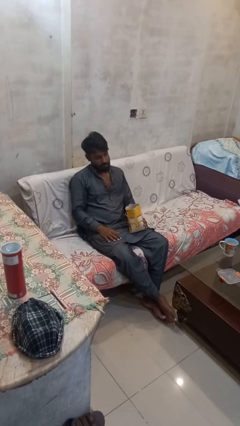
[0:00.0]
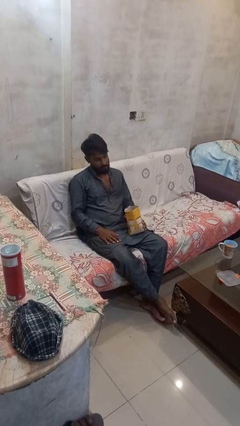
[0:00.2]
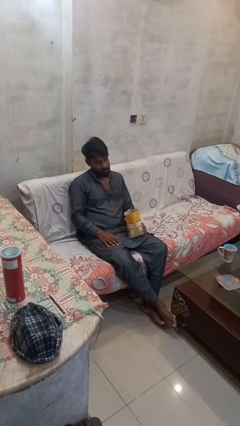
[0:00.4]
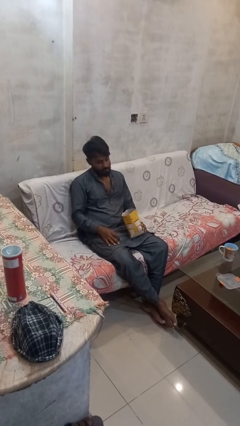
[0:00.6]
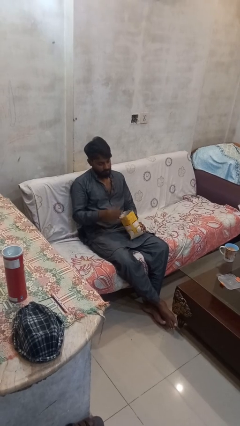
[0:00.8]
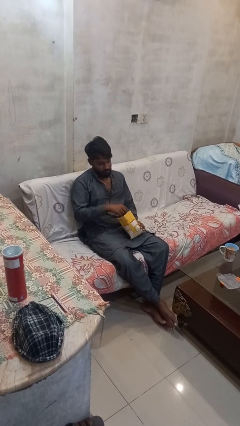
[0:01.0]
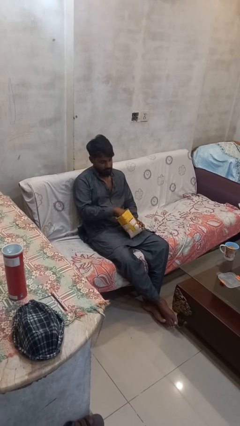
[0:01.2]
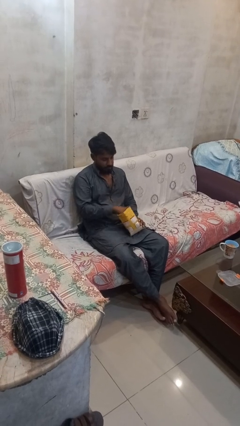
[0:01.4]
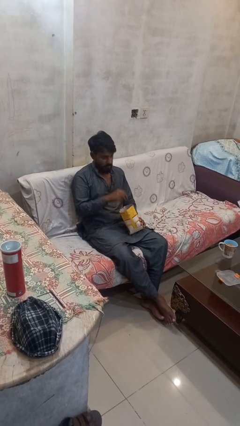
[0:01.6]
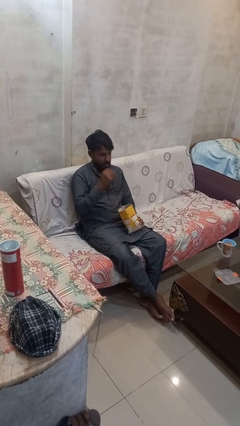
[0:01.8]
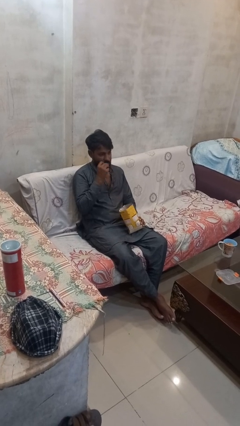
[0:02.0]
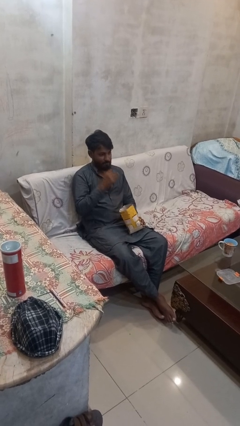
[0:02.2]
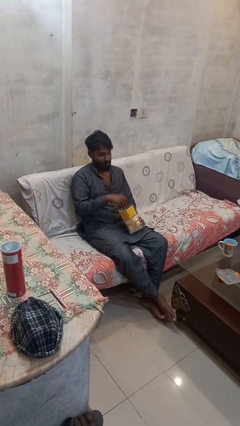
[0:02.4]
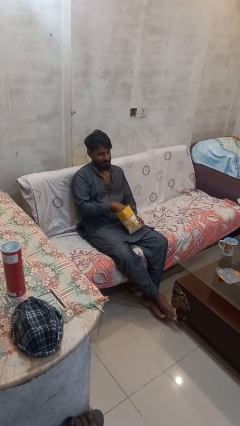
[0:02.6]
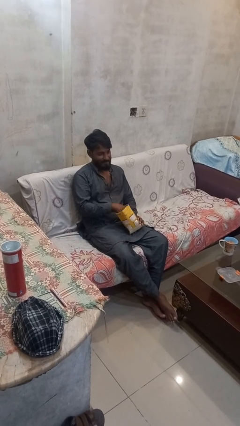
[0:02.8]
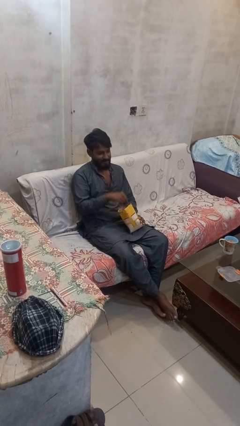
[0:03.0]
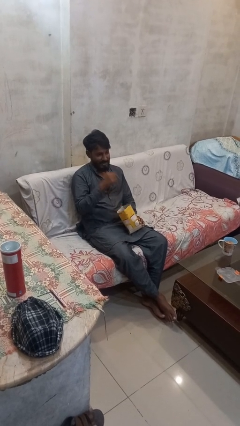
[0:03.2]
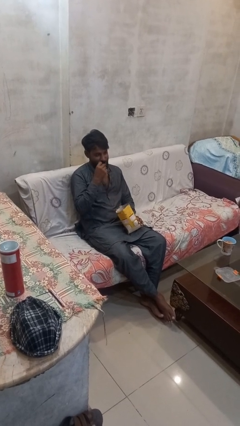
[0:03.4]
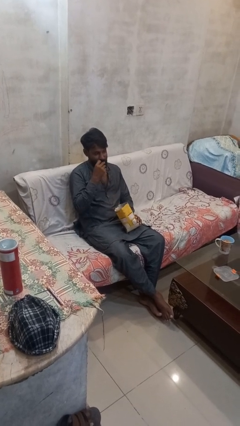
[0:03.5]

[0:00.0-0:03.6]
person eats snack from bag

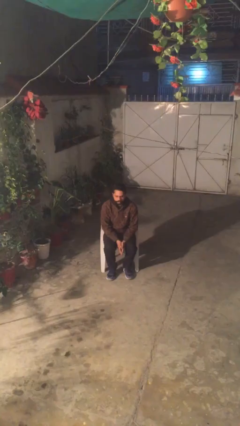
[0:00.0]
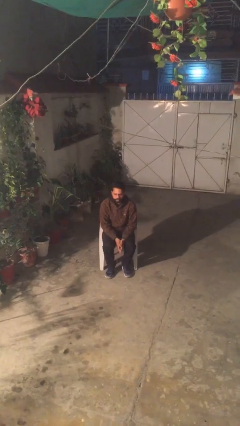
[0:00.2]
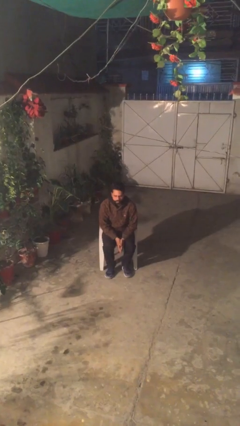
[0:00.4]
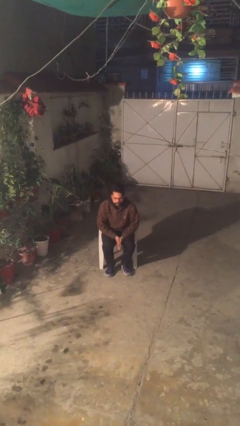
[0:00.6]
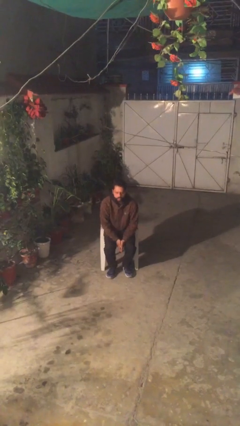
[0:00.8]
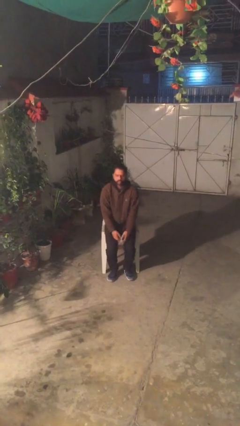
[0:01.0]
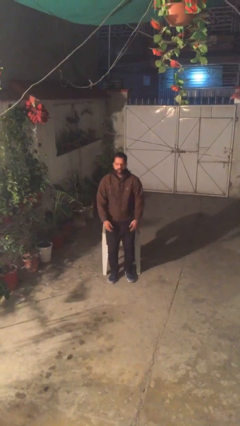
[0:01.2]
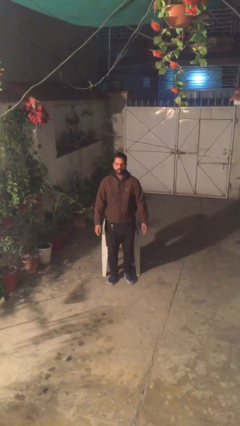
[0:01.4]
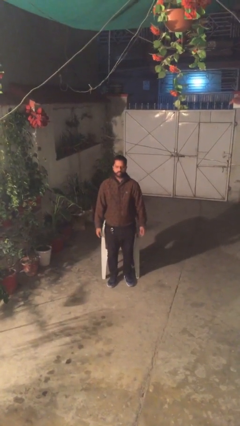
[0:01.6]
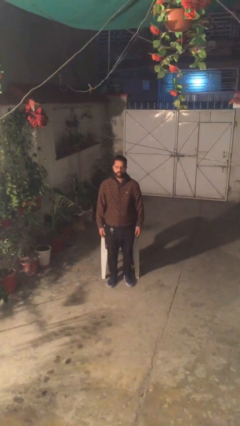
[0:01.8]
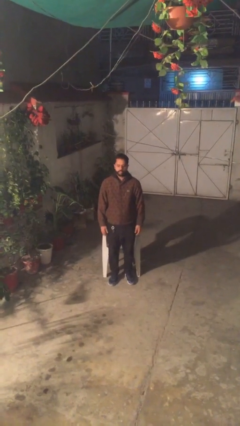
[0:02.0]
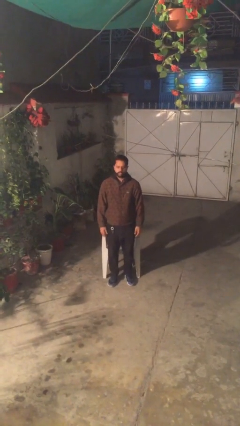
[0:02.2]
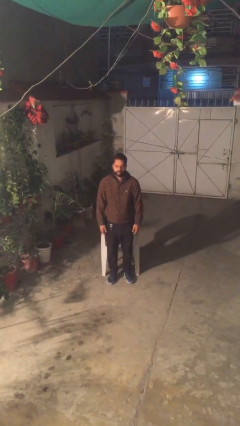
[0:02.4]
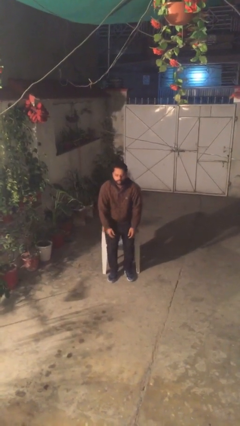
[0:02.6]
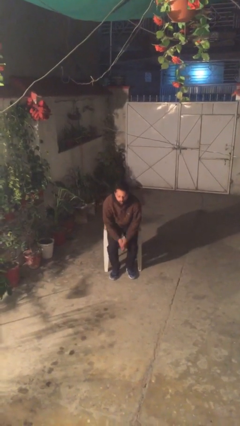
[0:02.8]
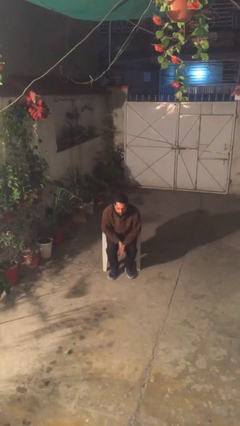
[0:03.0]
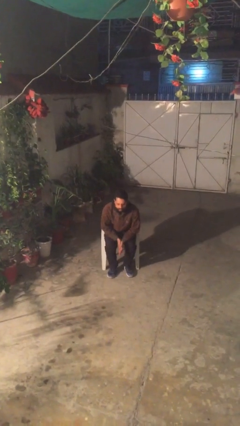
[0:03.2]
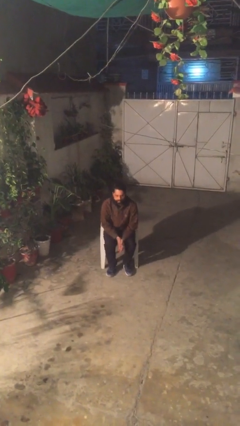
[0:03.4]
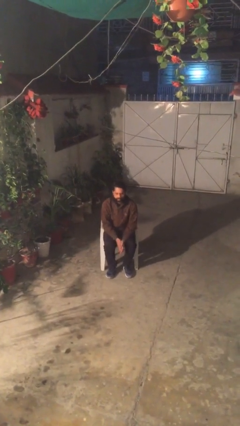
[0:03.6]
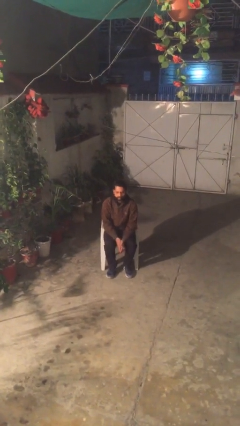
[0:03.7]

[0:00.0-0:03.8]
person stands up

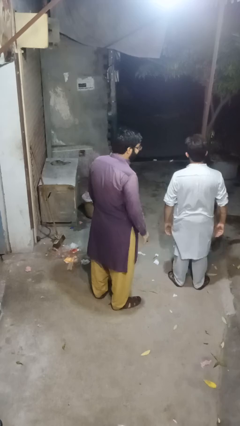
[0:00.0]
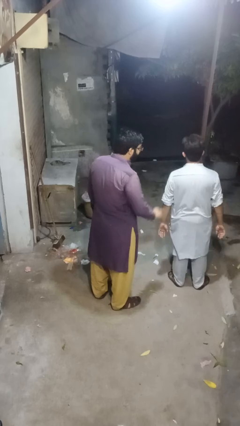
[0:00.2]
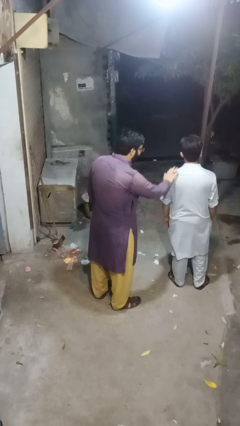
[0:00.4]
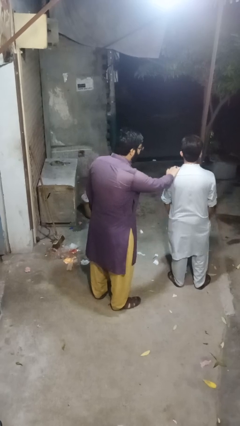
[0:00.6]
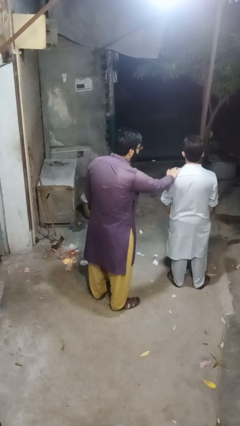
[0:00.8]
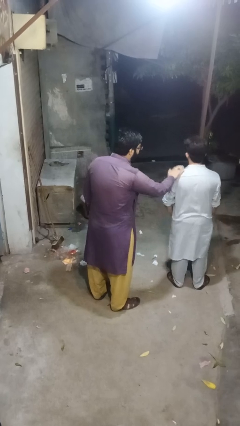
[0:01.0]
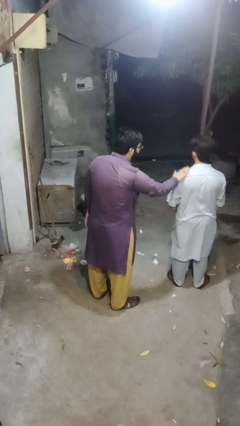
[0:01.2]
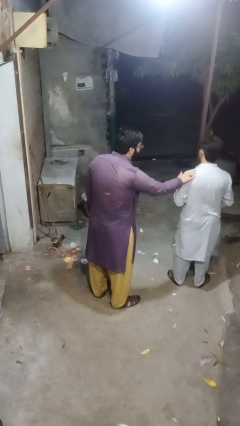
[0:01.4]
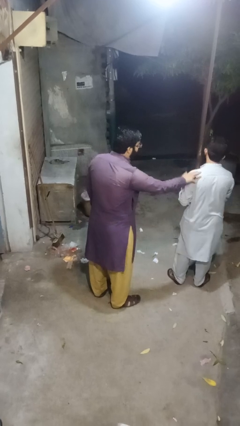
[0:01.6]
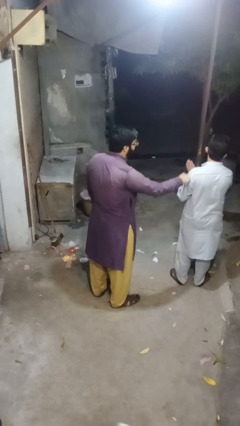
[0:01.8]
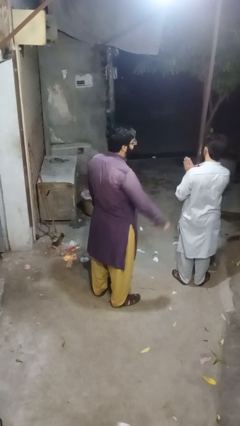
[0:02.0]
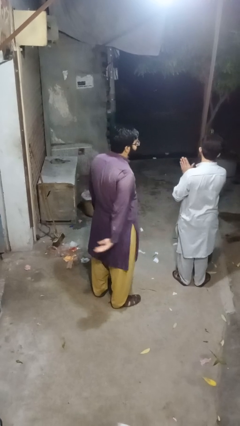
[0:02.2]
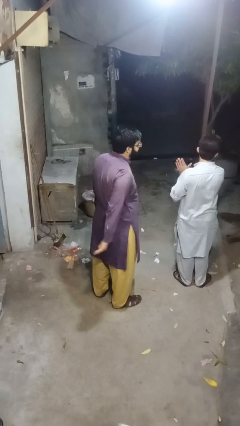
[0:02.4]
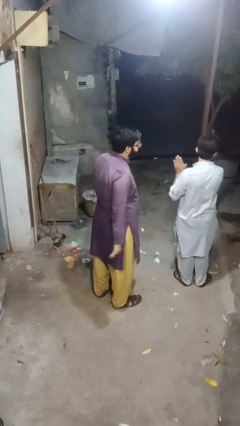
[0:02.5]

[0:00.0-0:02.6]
person touches back of person

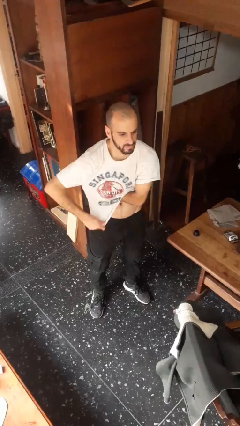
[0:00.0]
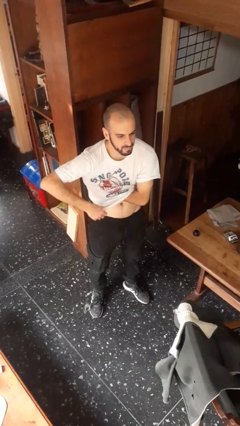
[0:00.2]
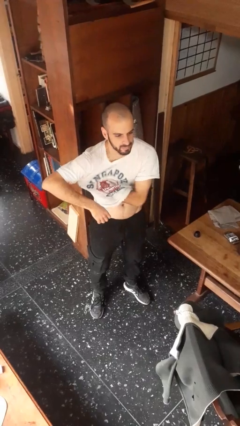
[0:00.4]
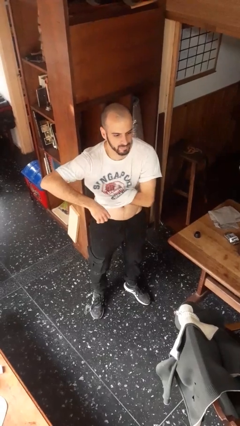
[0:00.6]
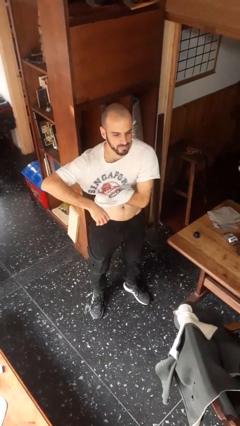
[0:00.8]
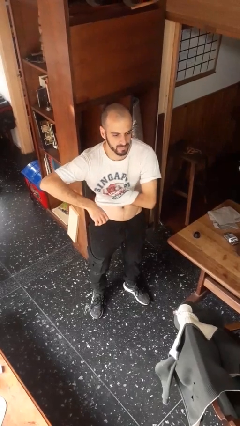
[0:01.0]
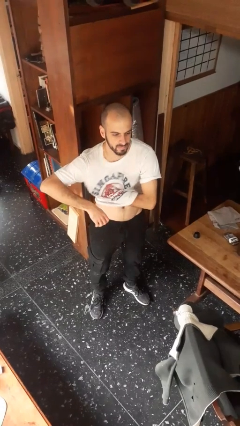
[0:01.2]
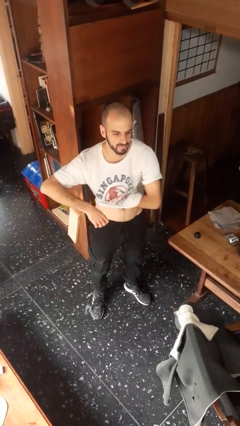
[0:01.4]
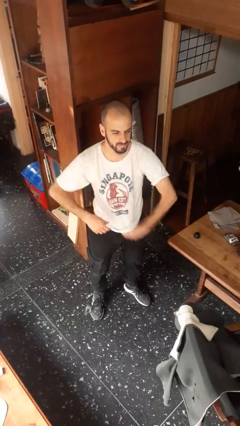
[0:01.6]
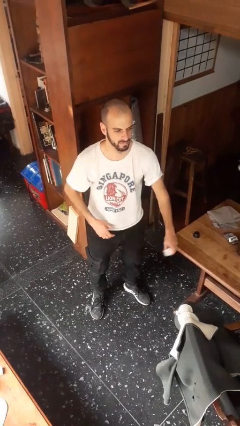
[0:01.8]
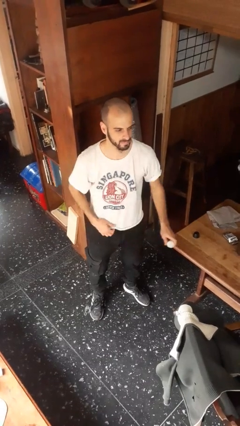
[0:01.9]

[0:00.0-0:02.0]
person applies deodorant

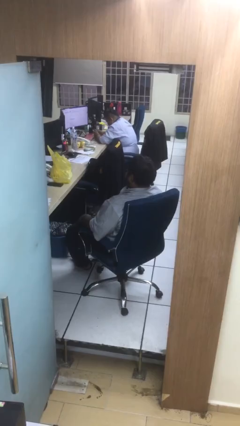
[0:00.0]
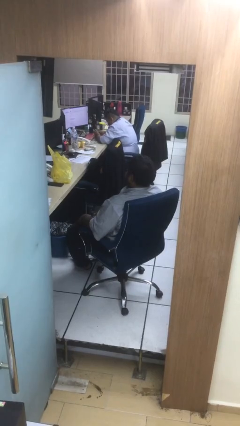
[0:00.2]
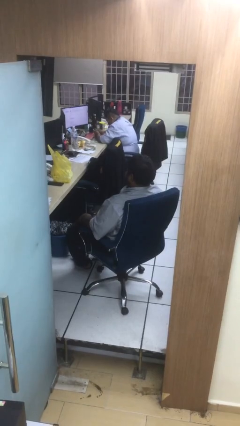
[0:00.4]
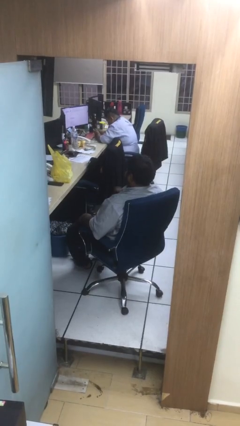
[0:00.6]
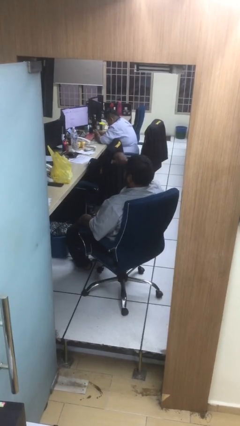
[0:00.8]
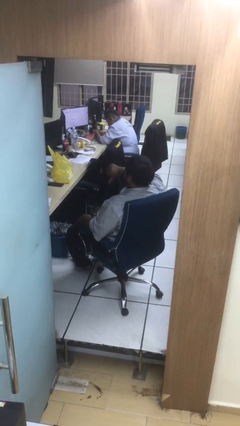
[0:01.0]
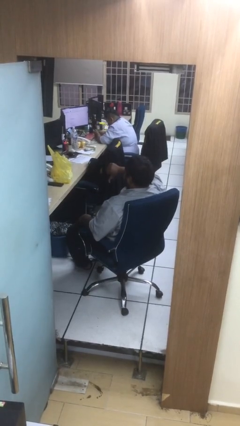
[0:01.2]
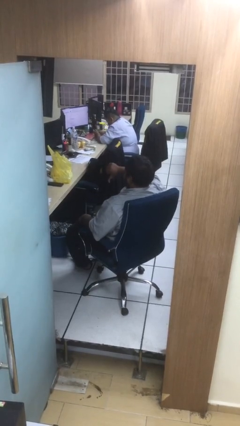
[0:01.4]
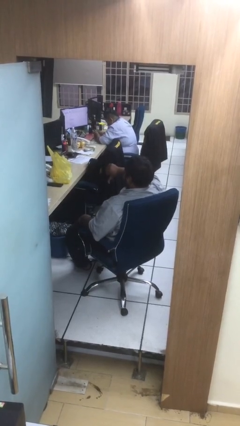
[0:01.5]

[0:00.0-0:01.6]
person gestures thumbs down

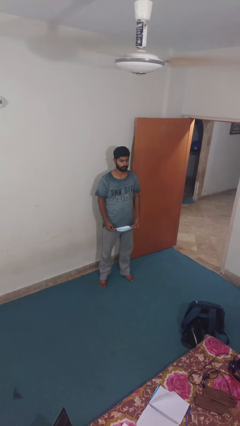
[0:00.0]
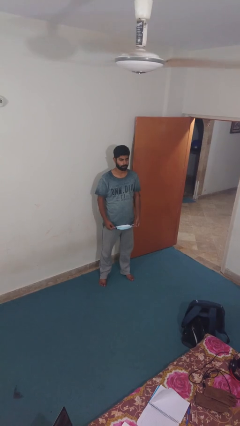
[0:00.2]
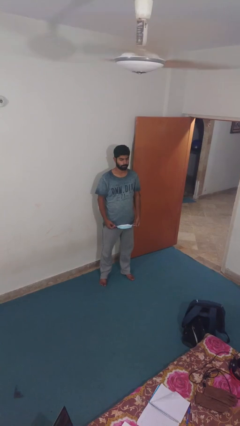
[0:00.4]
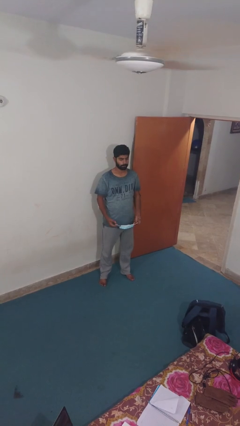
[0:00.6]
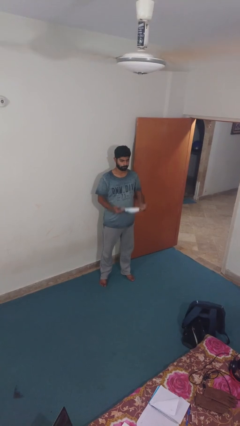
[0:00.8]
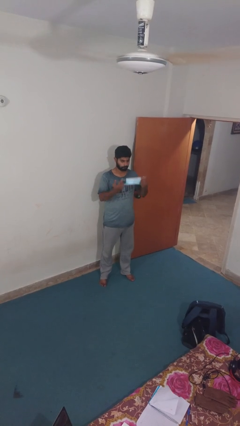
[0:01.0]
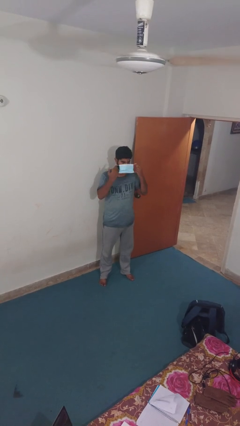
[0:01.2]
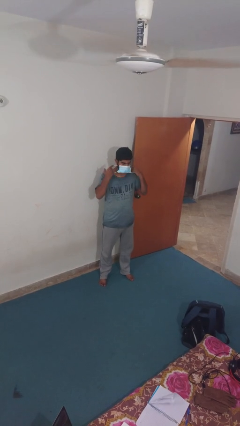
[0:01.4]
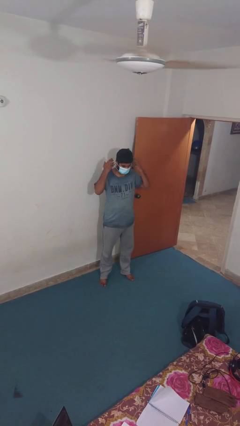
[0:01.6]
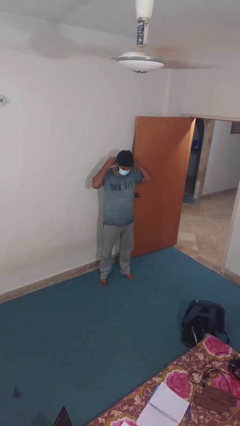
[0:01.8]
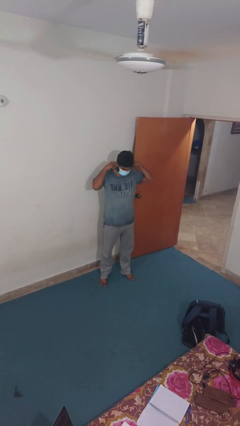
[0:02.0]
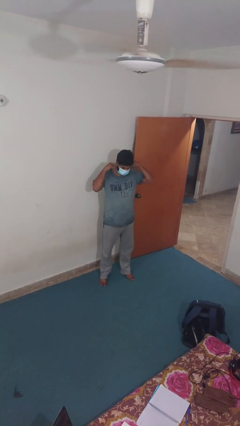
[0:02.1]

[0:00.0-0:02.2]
person puts on facemask

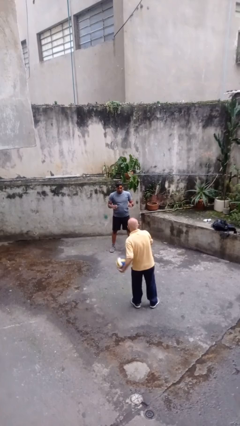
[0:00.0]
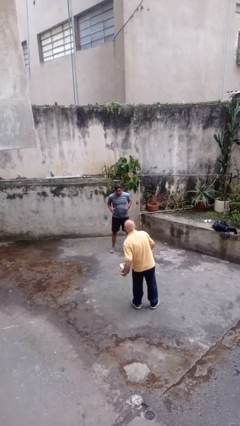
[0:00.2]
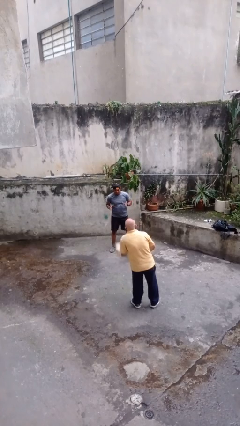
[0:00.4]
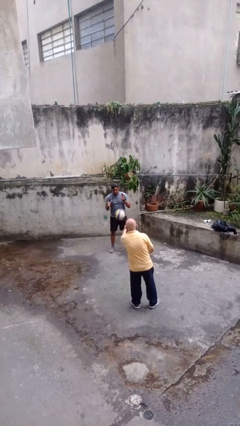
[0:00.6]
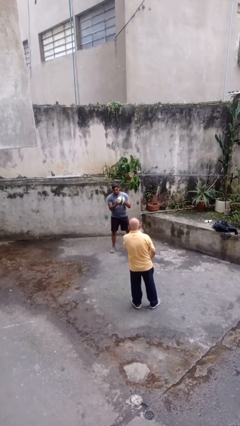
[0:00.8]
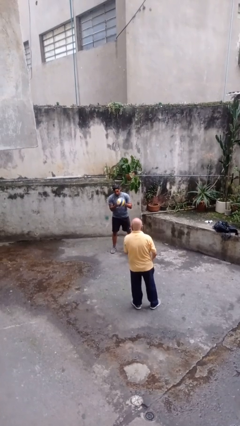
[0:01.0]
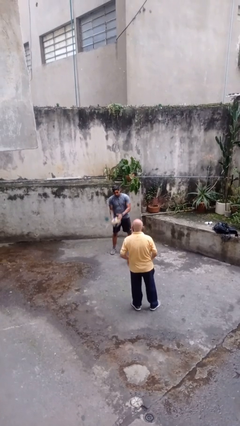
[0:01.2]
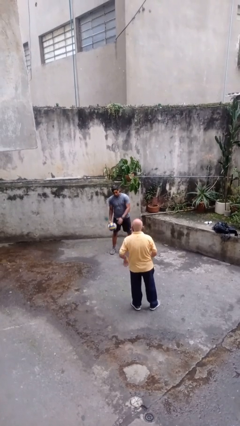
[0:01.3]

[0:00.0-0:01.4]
person catches object from person
